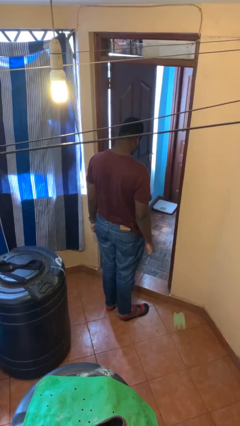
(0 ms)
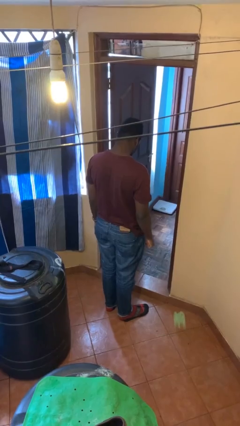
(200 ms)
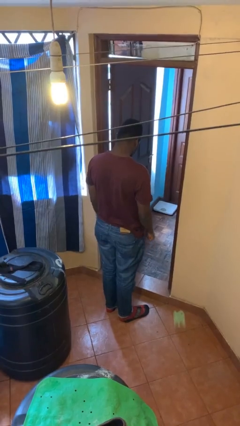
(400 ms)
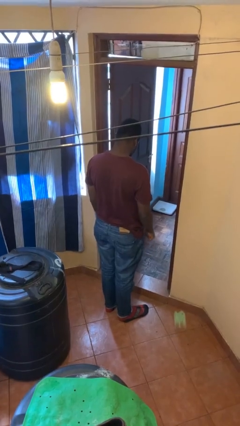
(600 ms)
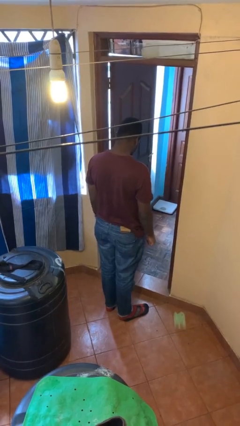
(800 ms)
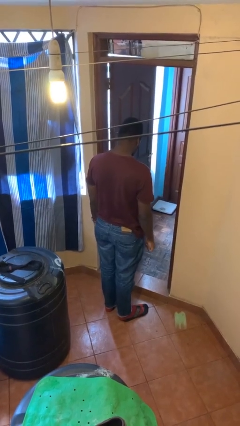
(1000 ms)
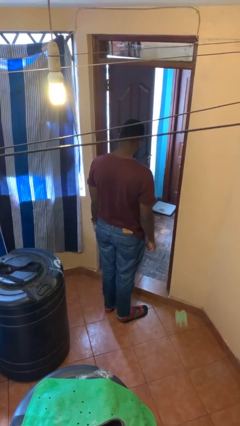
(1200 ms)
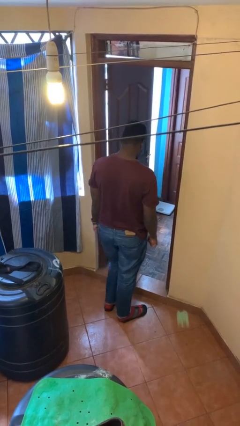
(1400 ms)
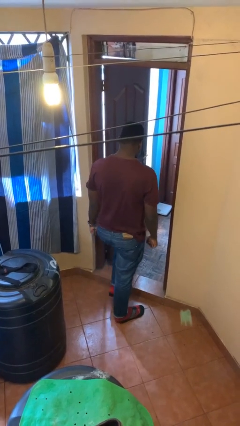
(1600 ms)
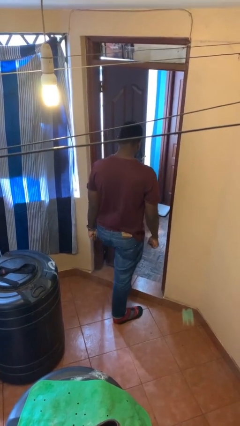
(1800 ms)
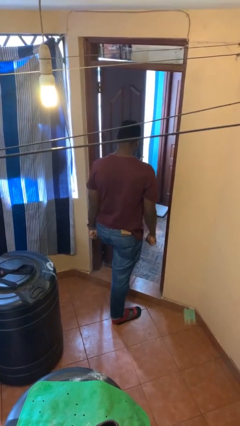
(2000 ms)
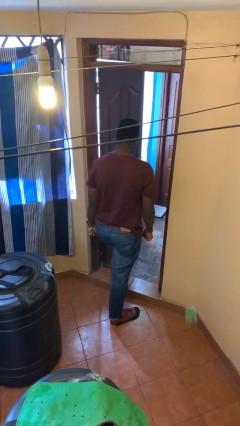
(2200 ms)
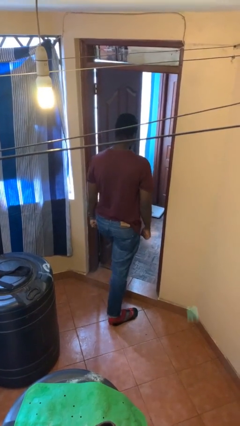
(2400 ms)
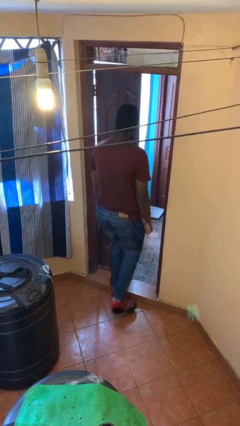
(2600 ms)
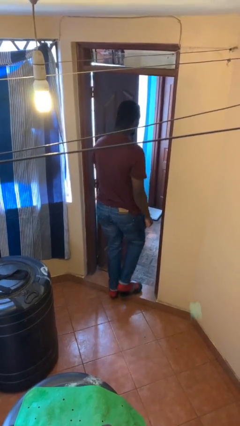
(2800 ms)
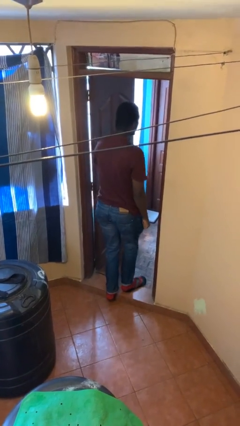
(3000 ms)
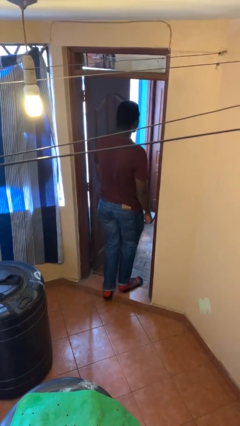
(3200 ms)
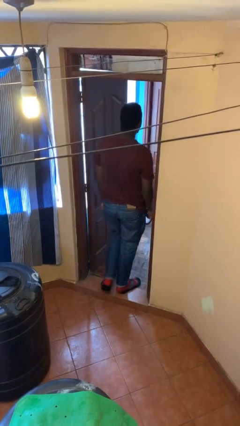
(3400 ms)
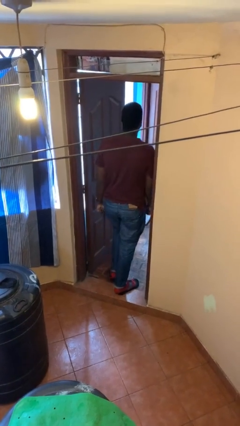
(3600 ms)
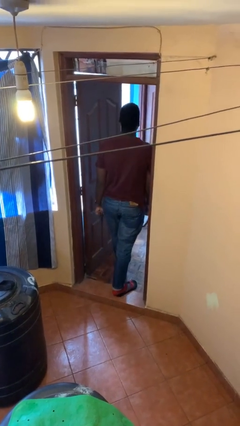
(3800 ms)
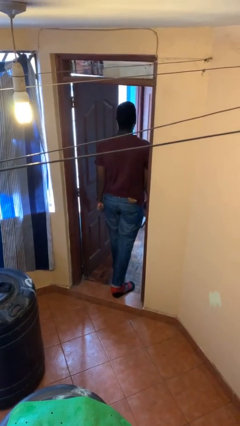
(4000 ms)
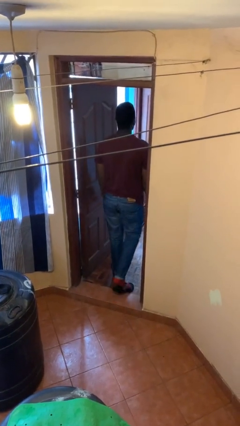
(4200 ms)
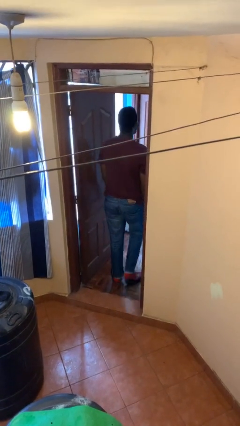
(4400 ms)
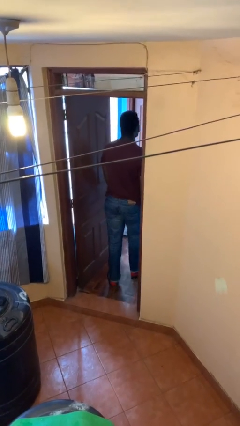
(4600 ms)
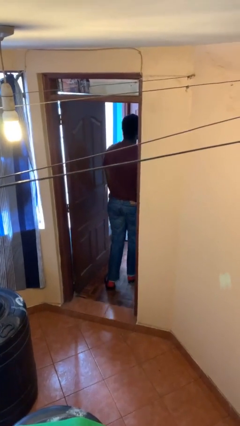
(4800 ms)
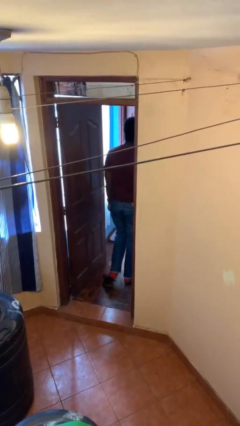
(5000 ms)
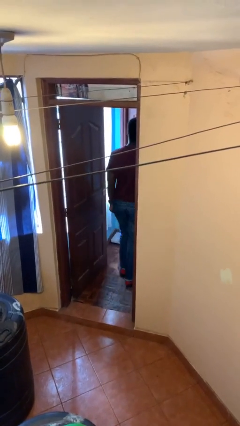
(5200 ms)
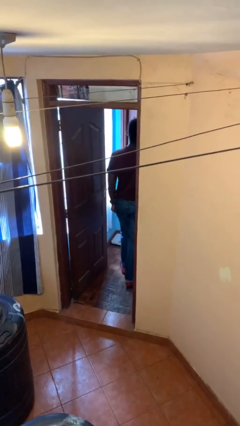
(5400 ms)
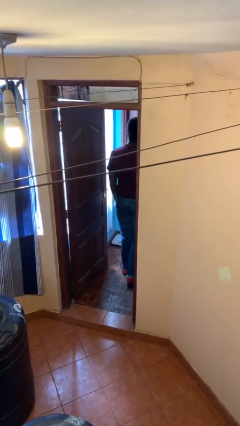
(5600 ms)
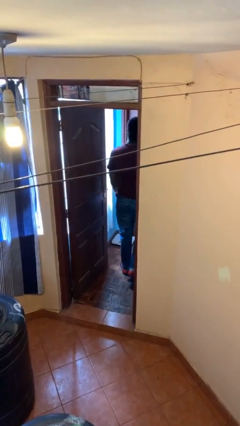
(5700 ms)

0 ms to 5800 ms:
person exits scene through structure

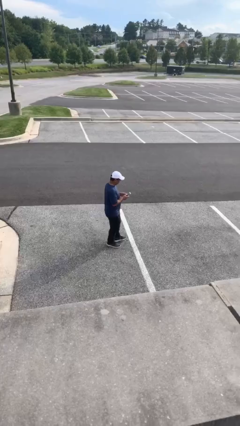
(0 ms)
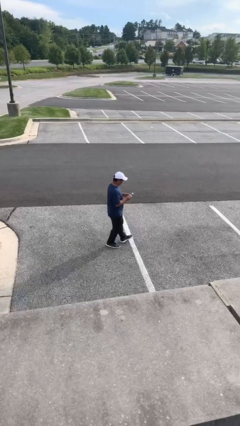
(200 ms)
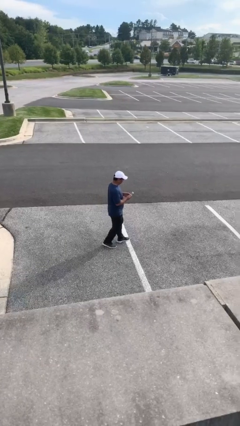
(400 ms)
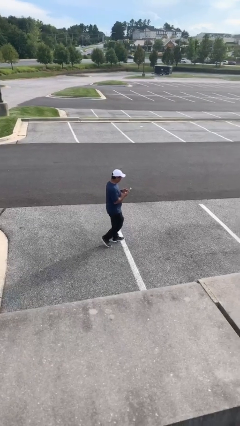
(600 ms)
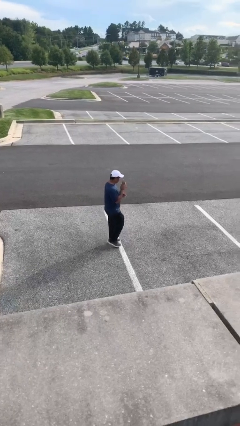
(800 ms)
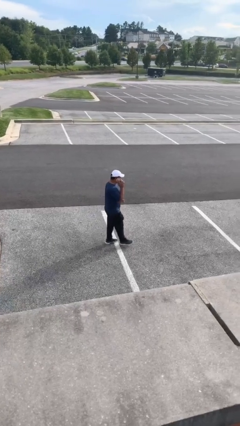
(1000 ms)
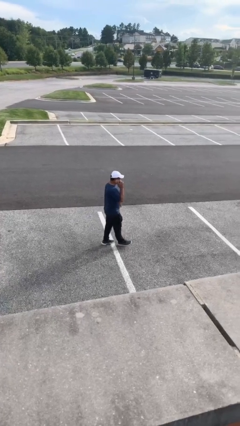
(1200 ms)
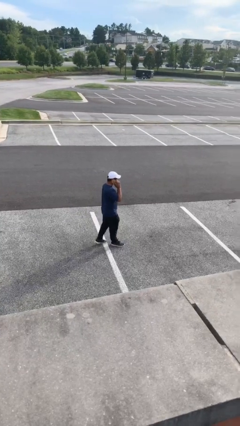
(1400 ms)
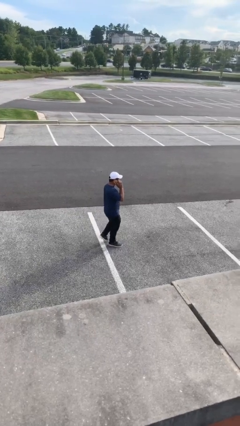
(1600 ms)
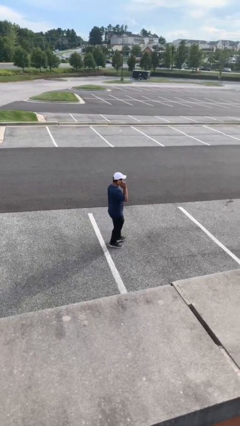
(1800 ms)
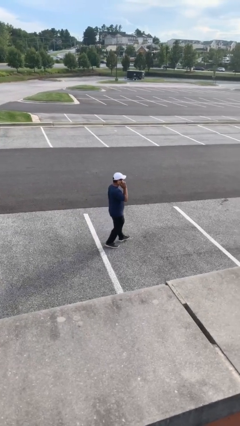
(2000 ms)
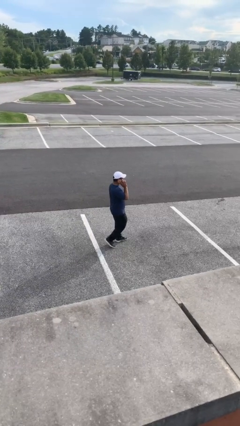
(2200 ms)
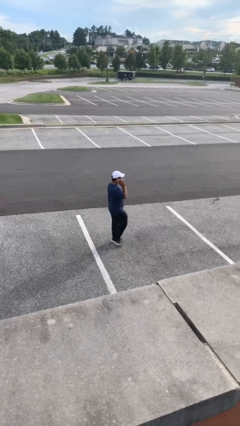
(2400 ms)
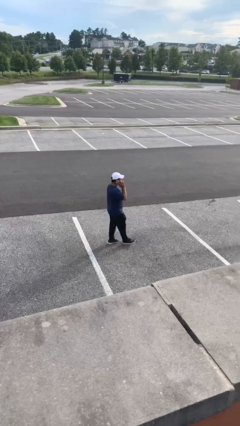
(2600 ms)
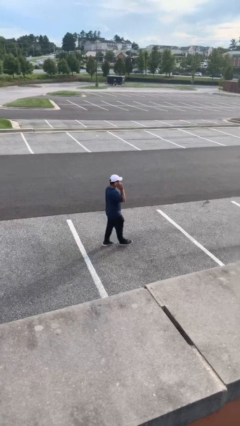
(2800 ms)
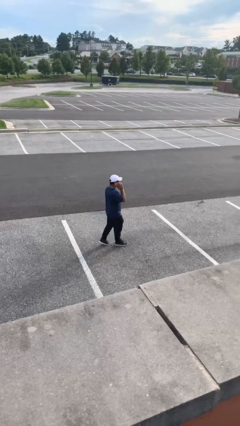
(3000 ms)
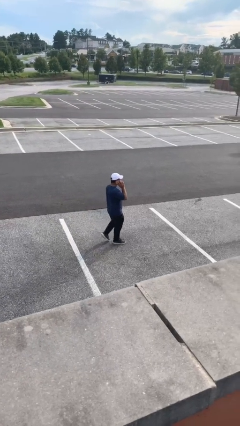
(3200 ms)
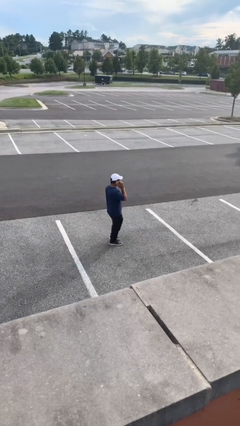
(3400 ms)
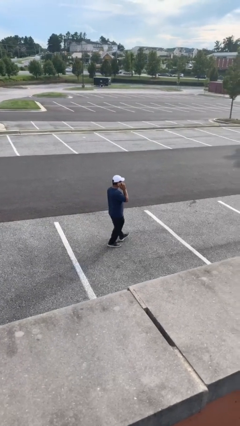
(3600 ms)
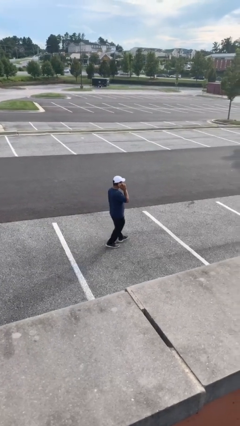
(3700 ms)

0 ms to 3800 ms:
person talks on phone

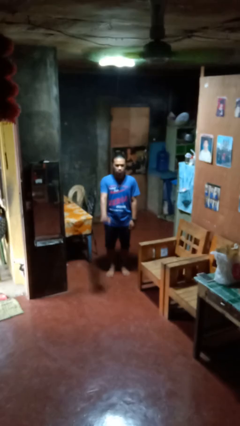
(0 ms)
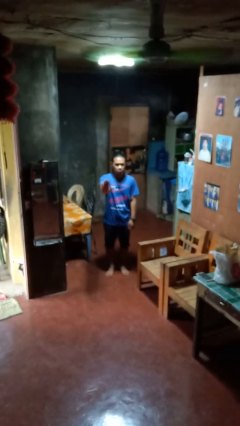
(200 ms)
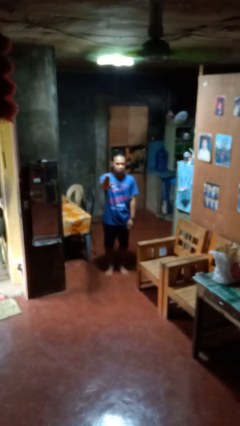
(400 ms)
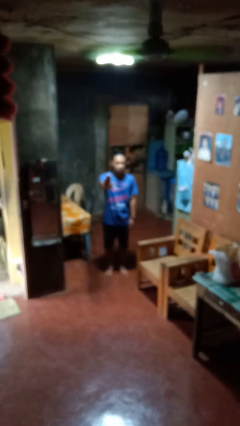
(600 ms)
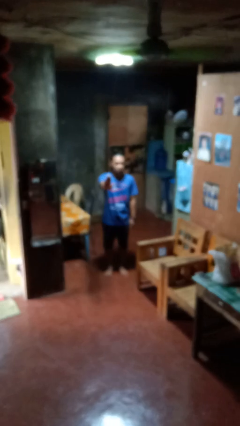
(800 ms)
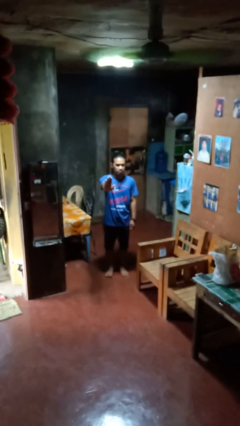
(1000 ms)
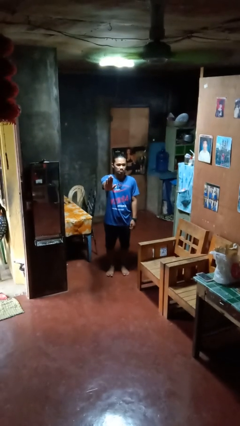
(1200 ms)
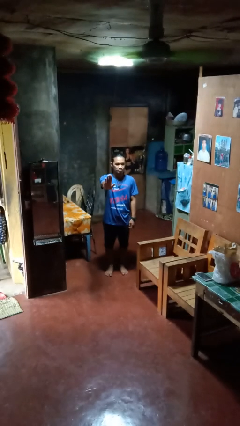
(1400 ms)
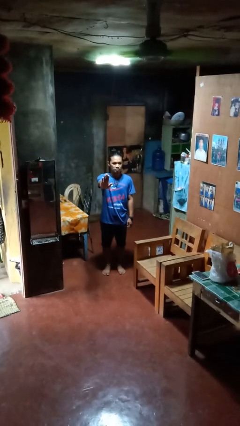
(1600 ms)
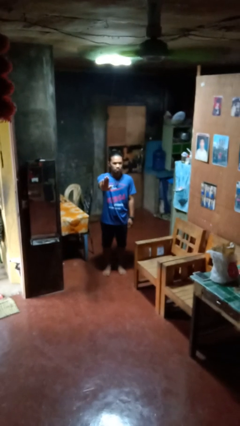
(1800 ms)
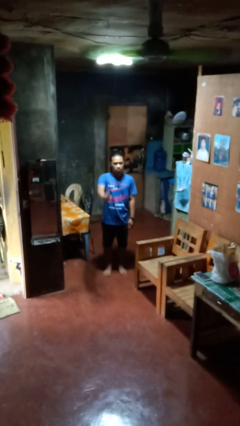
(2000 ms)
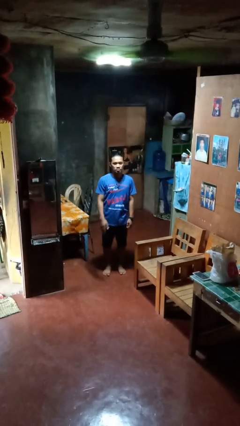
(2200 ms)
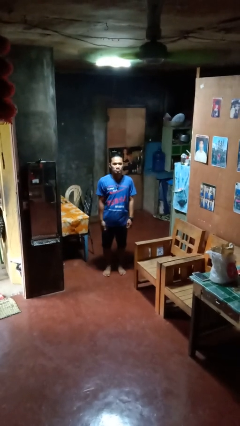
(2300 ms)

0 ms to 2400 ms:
person gestures stop

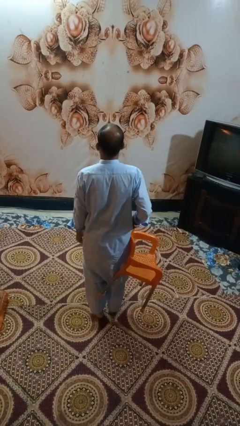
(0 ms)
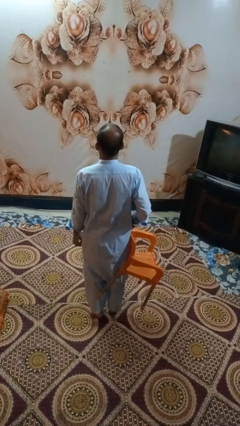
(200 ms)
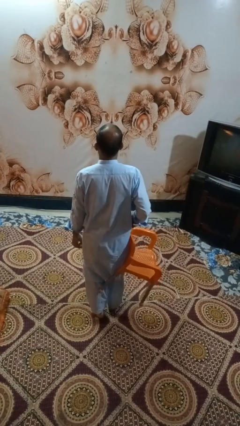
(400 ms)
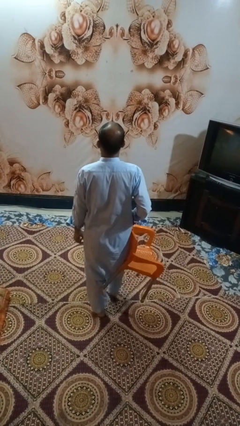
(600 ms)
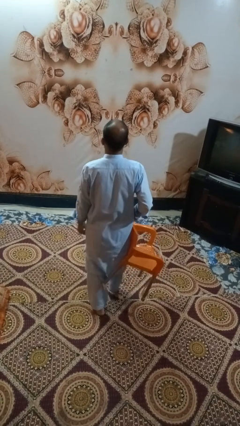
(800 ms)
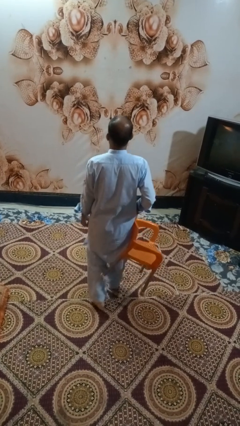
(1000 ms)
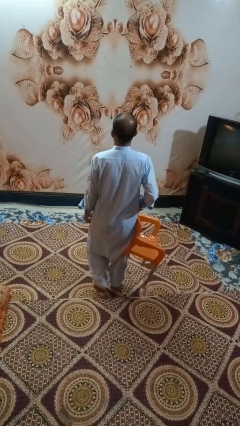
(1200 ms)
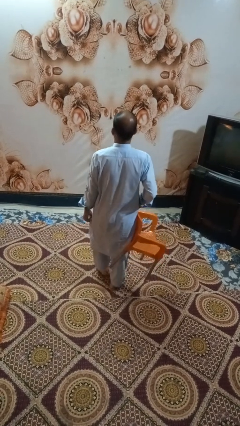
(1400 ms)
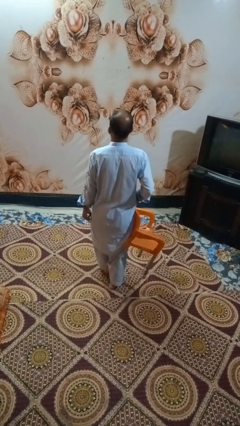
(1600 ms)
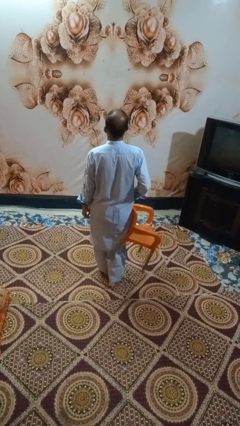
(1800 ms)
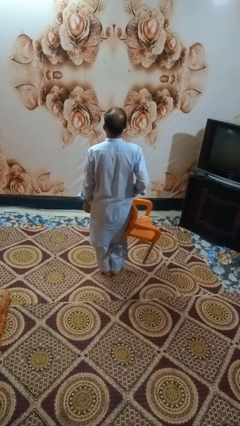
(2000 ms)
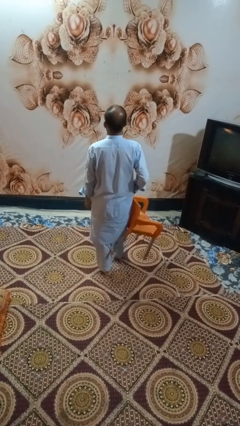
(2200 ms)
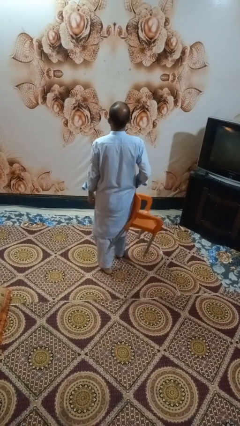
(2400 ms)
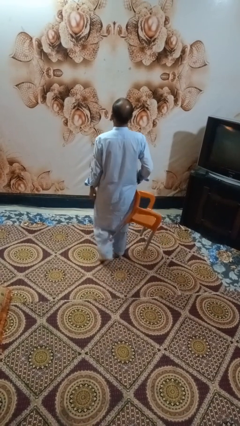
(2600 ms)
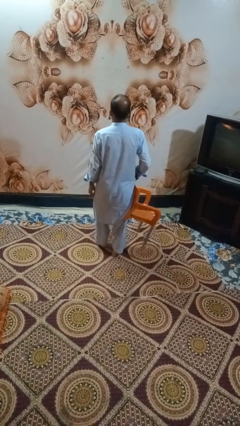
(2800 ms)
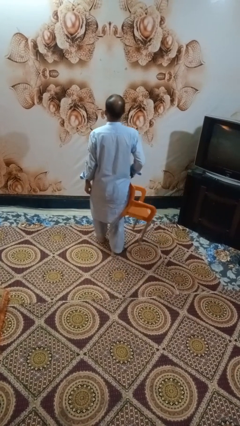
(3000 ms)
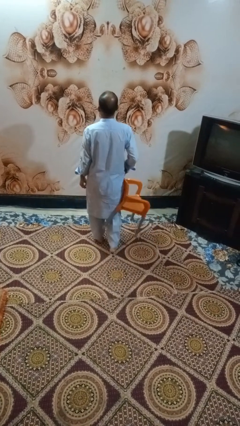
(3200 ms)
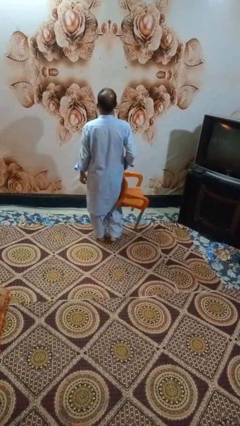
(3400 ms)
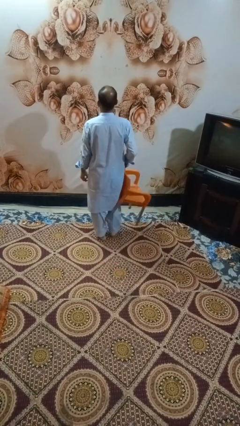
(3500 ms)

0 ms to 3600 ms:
person carries furniture

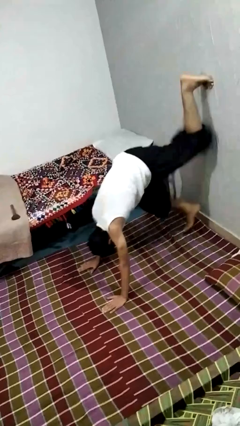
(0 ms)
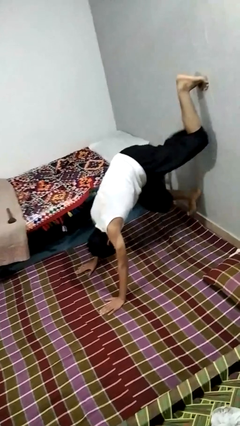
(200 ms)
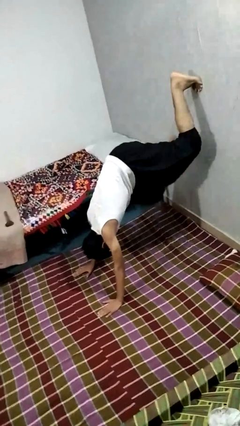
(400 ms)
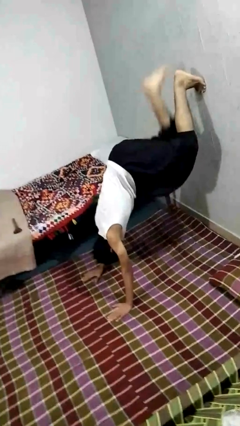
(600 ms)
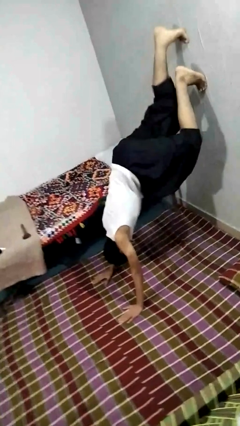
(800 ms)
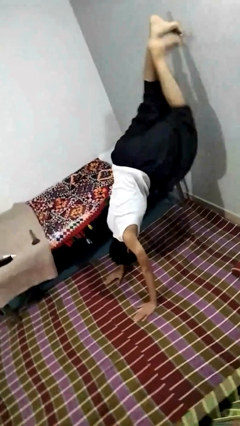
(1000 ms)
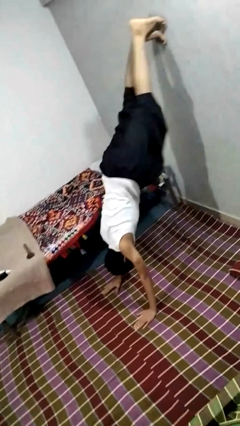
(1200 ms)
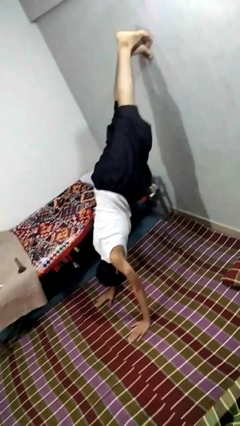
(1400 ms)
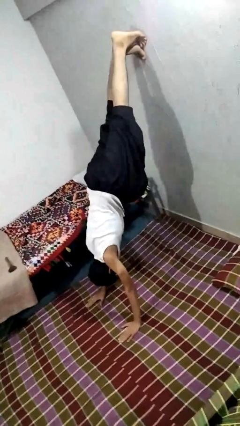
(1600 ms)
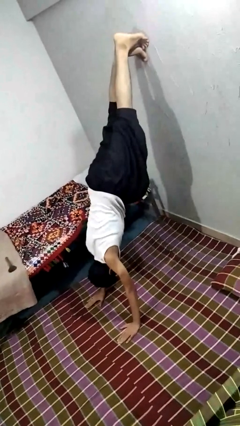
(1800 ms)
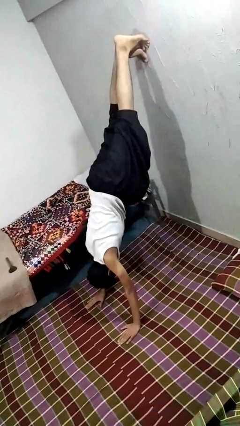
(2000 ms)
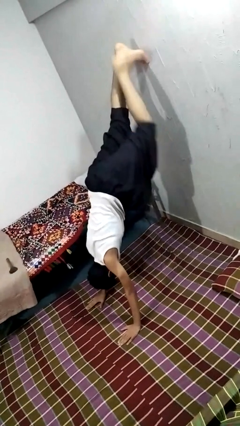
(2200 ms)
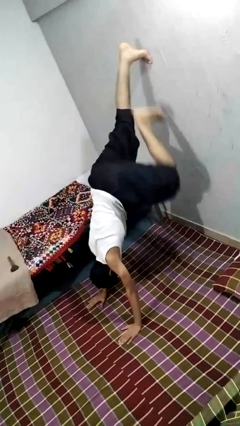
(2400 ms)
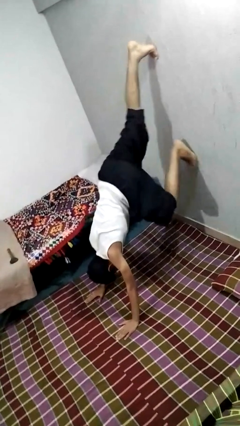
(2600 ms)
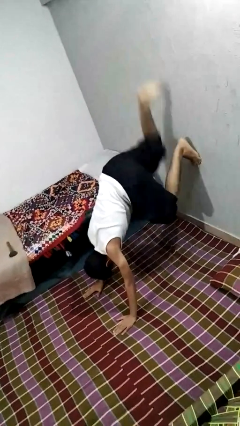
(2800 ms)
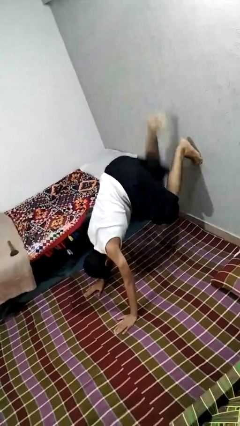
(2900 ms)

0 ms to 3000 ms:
person handstand
